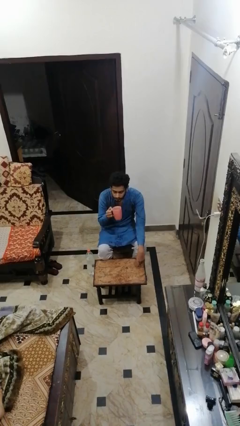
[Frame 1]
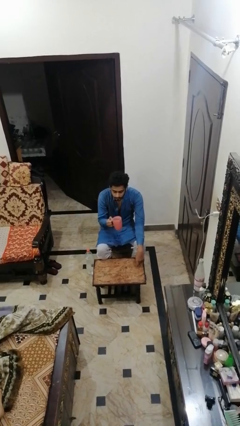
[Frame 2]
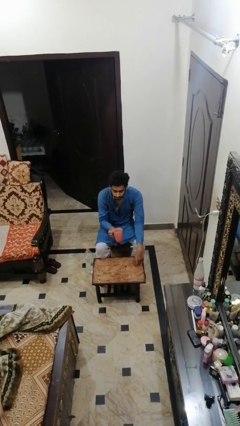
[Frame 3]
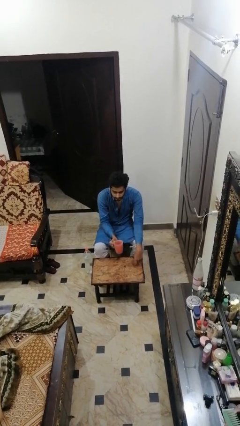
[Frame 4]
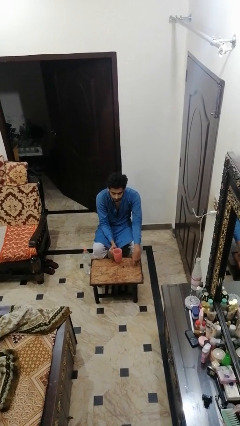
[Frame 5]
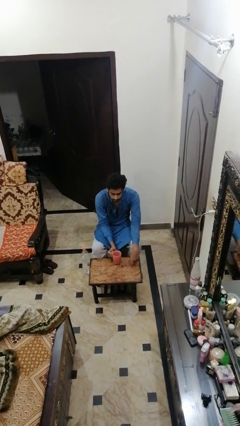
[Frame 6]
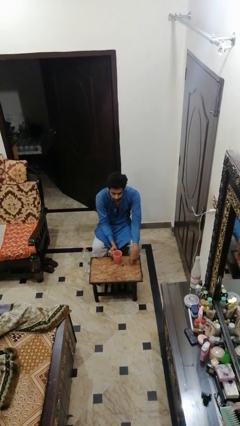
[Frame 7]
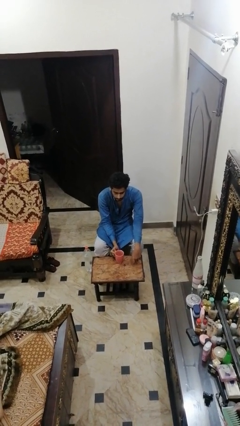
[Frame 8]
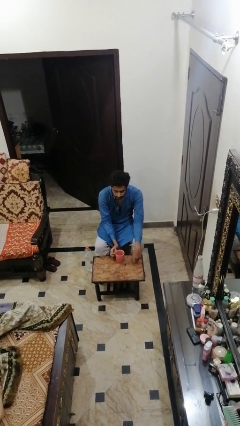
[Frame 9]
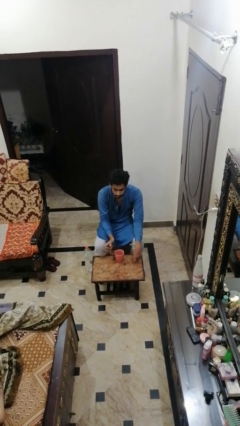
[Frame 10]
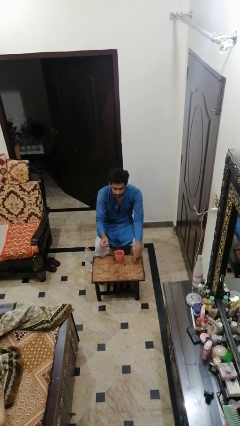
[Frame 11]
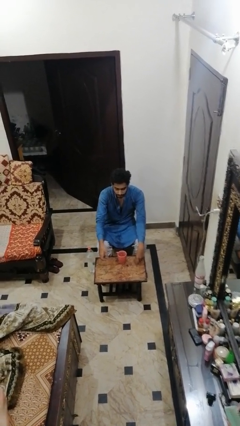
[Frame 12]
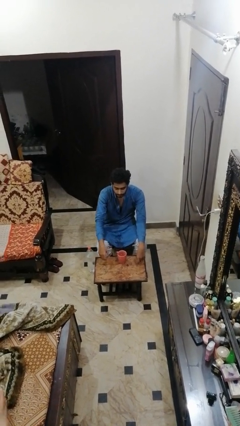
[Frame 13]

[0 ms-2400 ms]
person puts down object on table

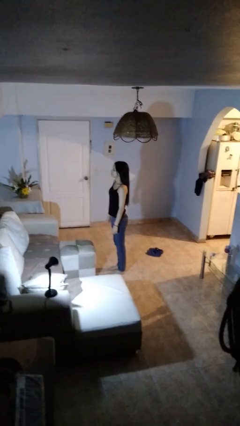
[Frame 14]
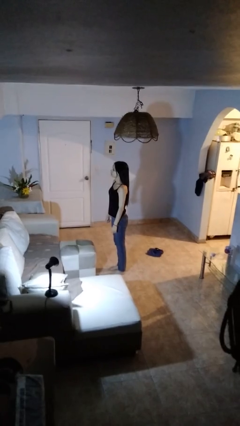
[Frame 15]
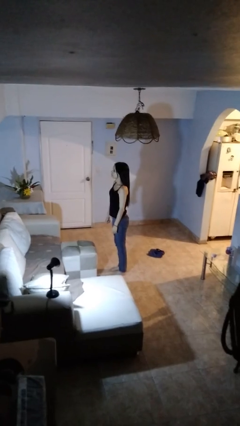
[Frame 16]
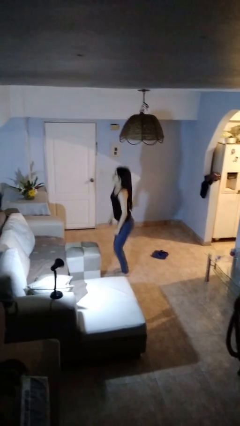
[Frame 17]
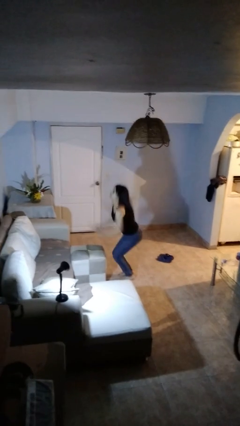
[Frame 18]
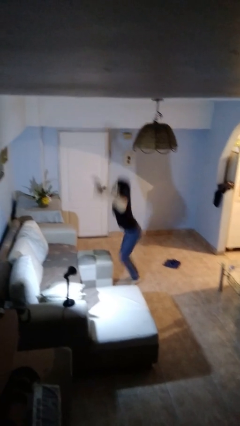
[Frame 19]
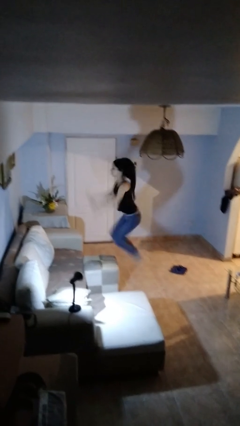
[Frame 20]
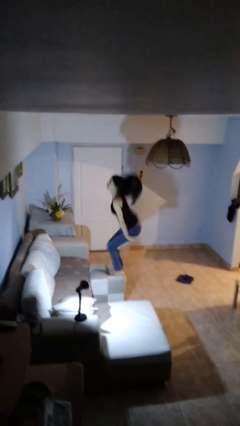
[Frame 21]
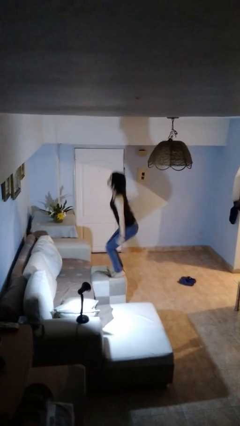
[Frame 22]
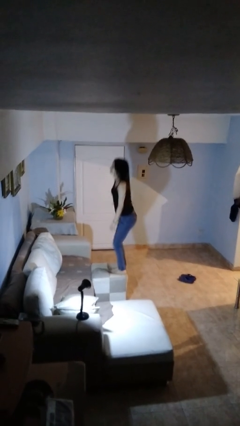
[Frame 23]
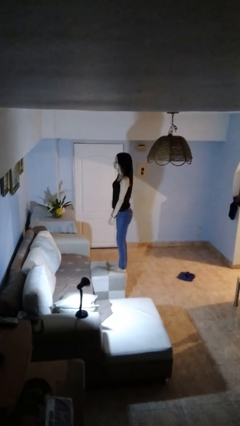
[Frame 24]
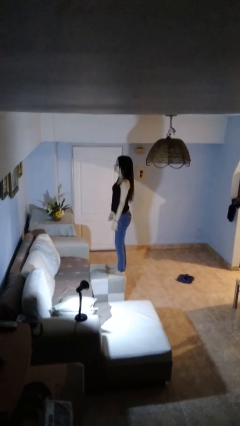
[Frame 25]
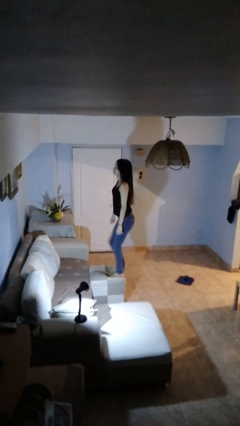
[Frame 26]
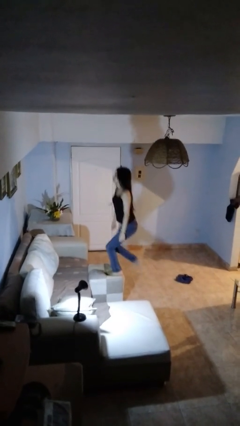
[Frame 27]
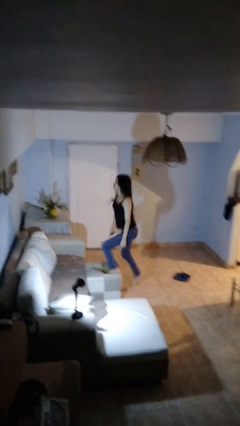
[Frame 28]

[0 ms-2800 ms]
person jumps on couch

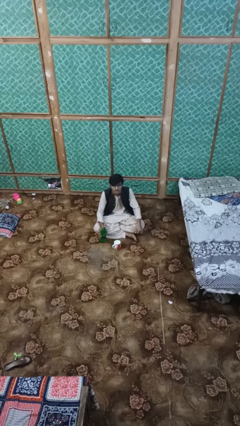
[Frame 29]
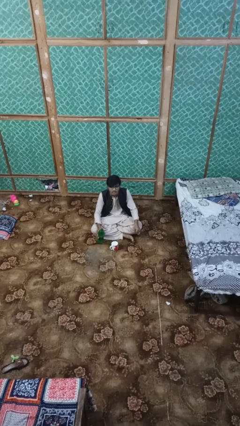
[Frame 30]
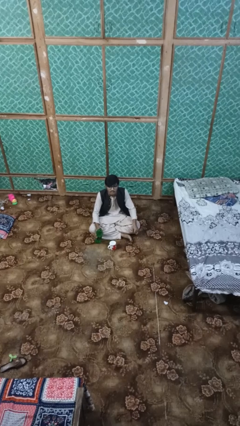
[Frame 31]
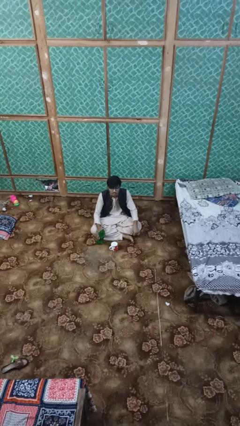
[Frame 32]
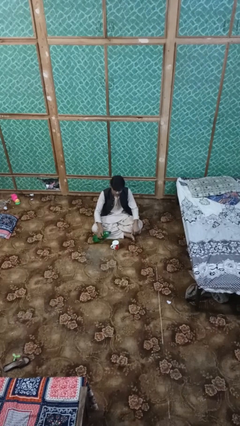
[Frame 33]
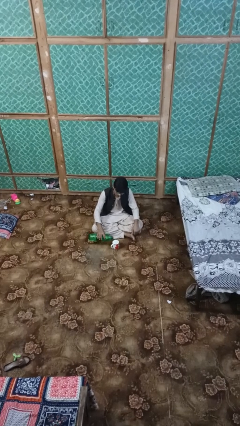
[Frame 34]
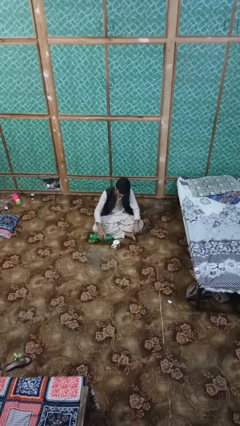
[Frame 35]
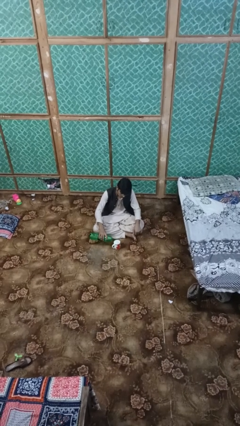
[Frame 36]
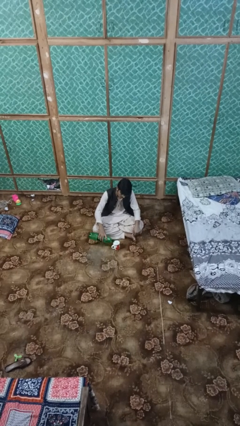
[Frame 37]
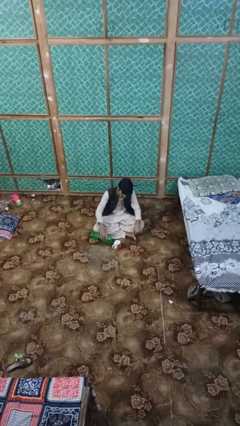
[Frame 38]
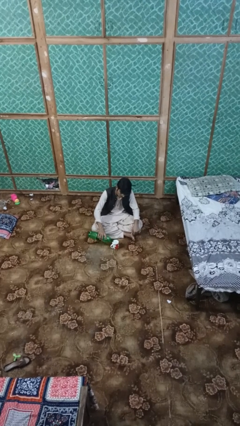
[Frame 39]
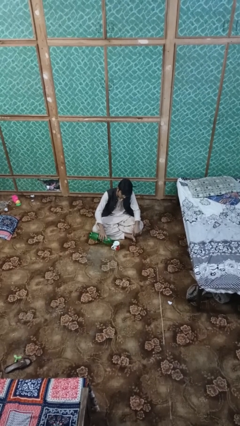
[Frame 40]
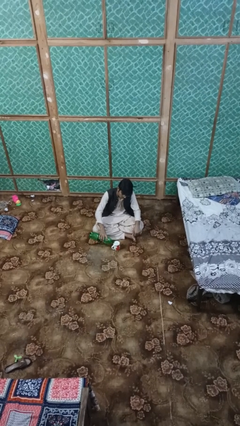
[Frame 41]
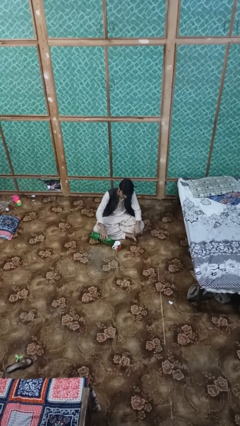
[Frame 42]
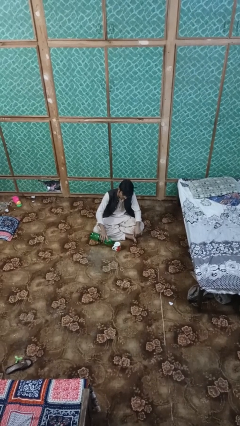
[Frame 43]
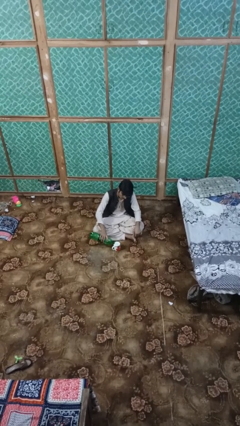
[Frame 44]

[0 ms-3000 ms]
person pours liquid into cup

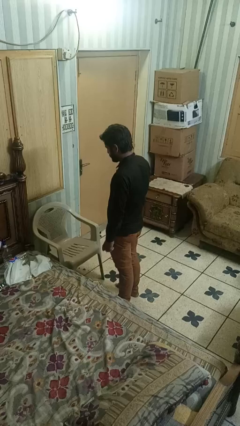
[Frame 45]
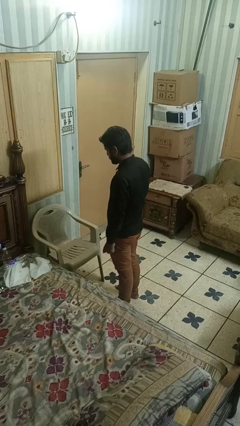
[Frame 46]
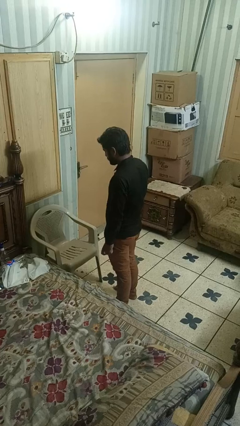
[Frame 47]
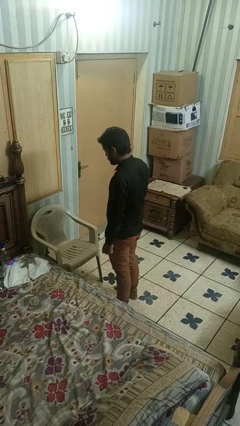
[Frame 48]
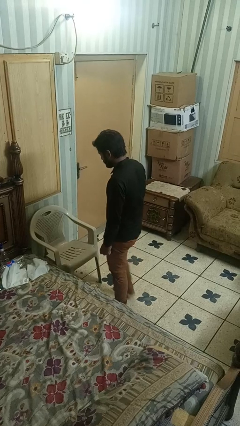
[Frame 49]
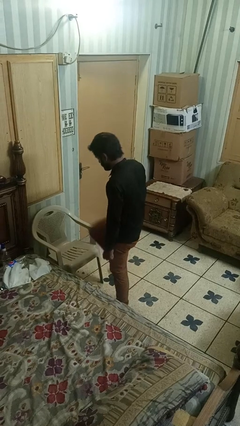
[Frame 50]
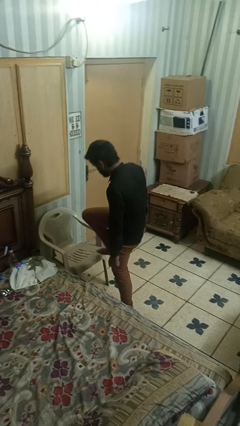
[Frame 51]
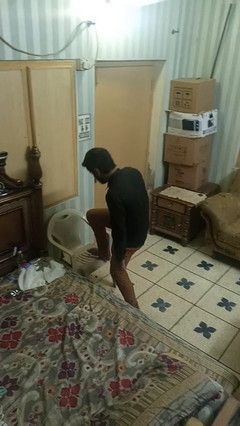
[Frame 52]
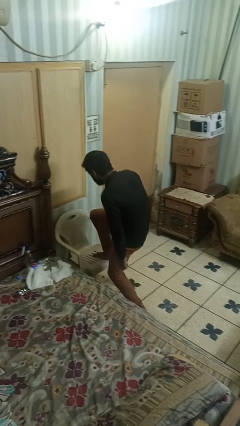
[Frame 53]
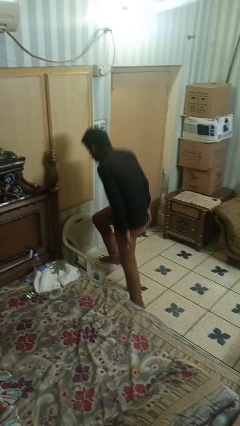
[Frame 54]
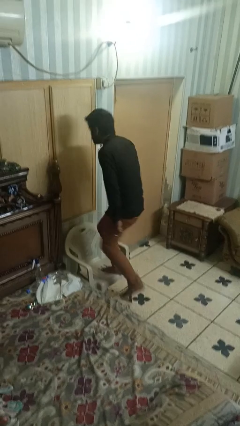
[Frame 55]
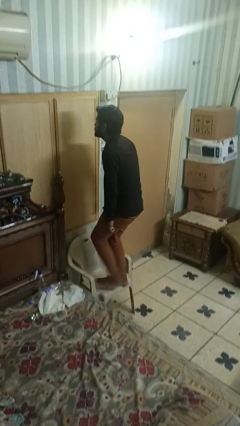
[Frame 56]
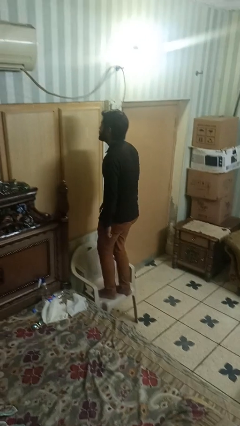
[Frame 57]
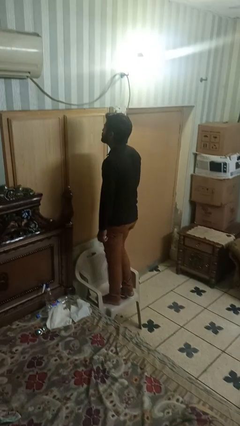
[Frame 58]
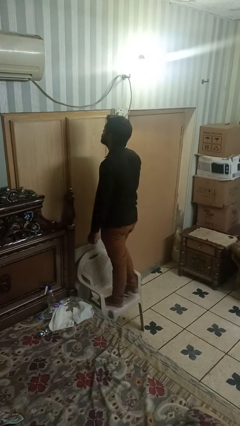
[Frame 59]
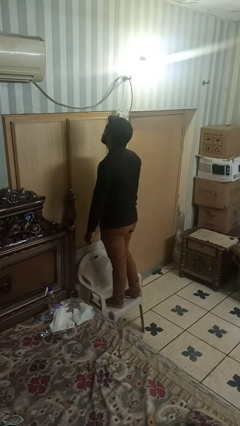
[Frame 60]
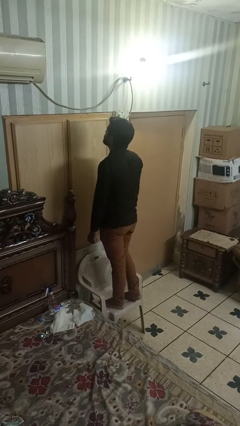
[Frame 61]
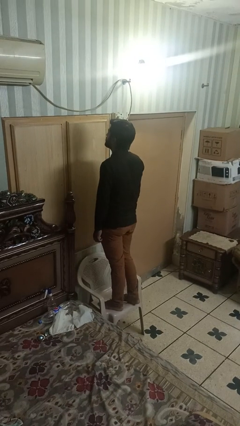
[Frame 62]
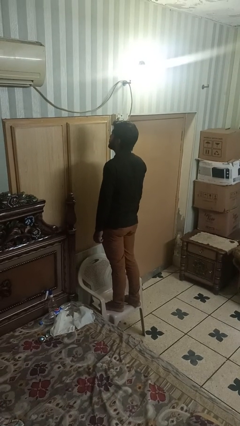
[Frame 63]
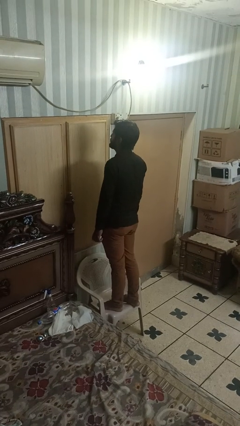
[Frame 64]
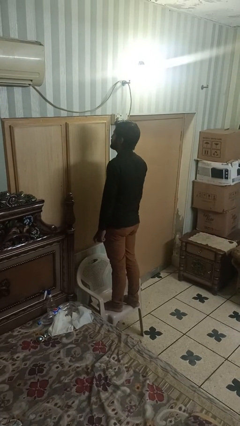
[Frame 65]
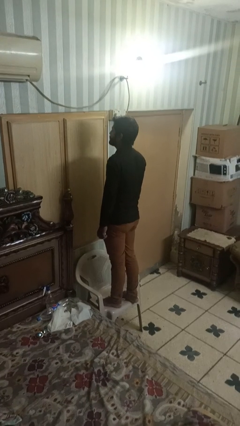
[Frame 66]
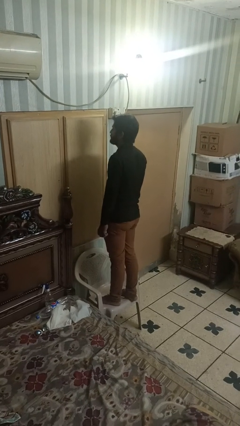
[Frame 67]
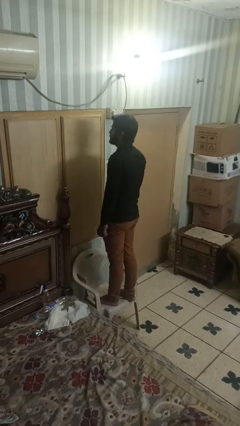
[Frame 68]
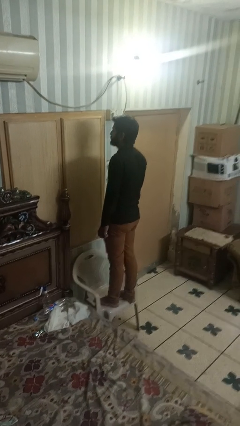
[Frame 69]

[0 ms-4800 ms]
person climbs on chair

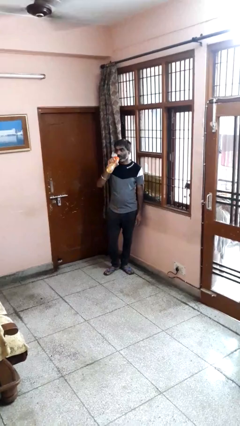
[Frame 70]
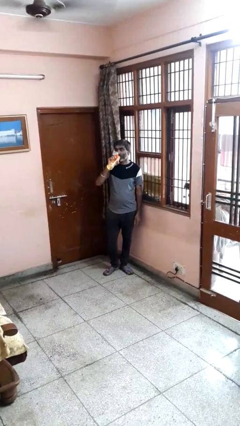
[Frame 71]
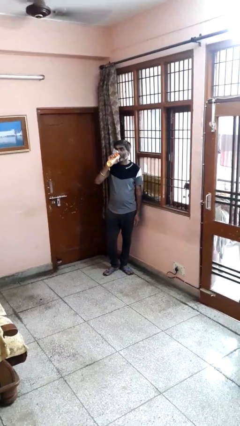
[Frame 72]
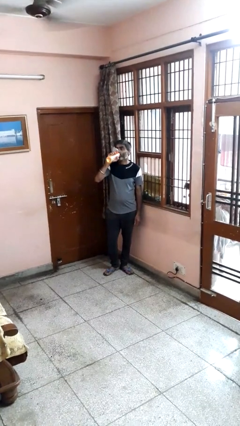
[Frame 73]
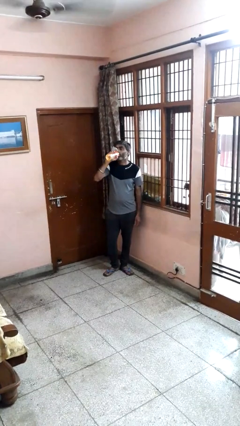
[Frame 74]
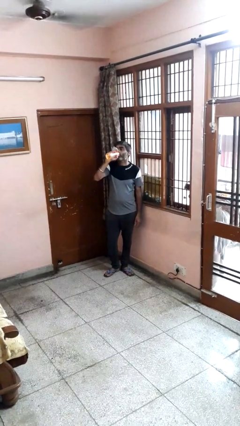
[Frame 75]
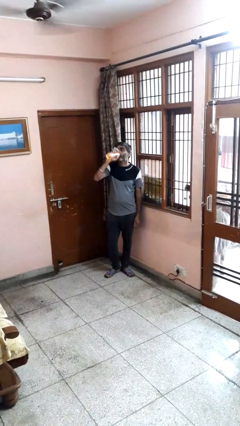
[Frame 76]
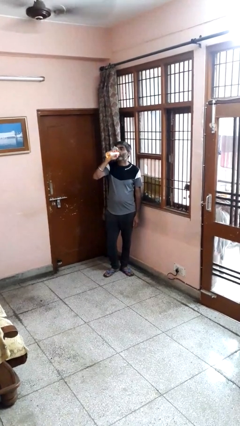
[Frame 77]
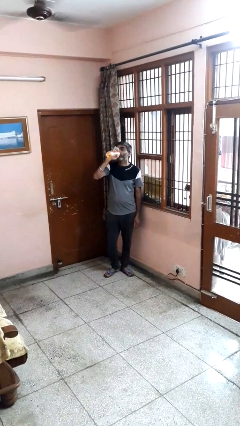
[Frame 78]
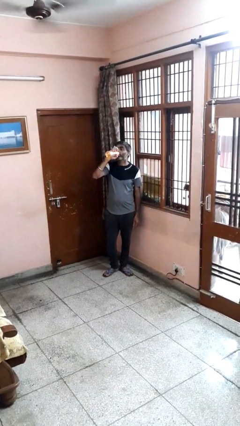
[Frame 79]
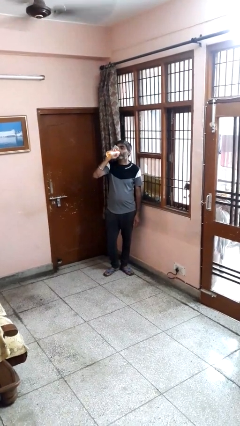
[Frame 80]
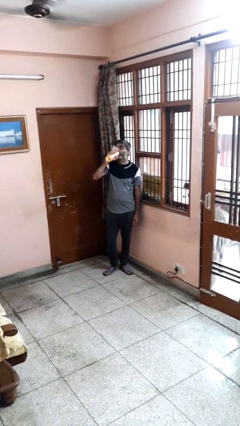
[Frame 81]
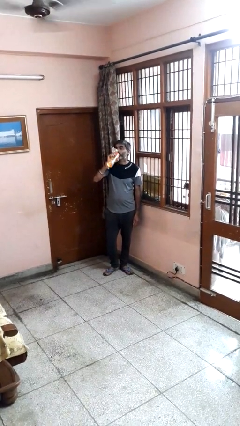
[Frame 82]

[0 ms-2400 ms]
person drinks from bottle

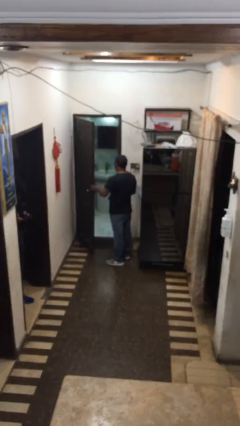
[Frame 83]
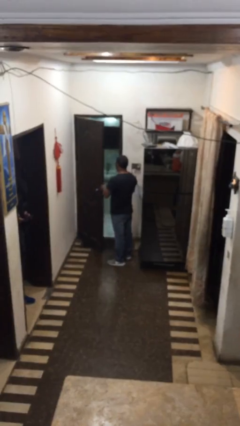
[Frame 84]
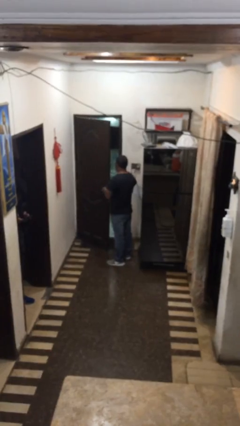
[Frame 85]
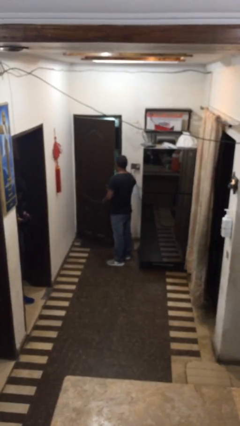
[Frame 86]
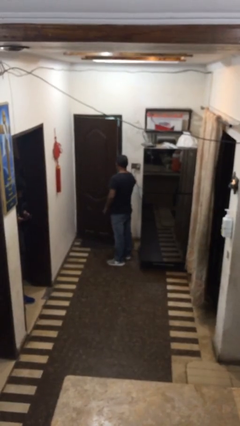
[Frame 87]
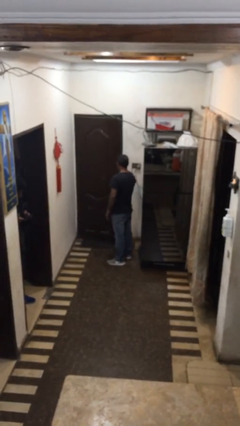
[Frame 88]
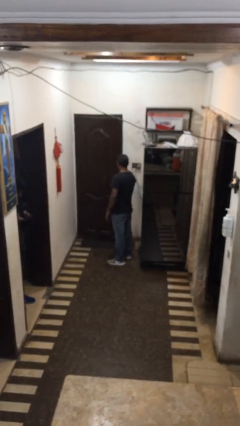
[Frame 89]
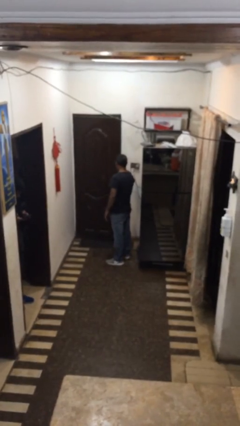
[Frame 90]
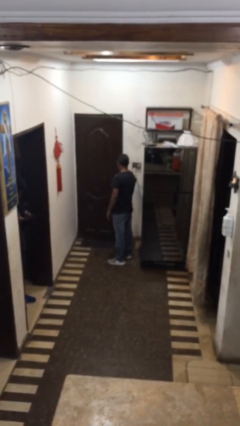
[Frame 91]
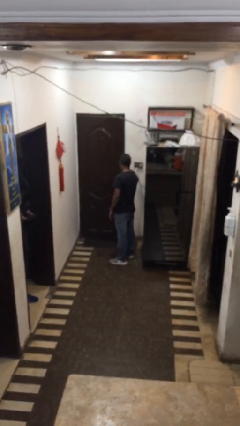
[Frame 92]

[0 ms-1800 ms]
person closes facility door
